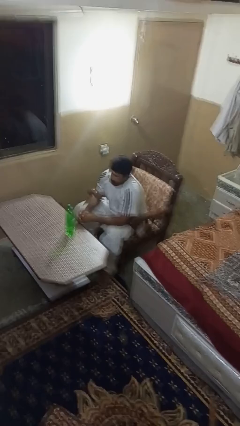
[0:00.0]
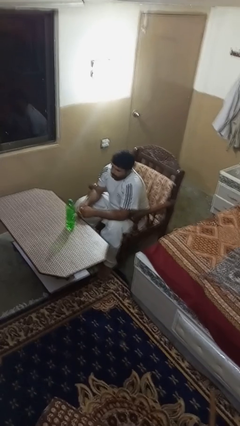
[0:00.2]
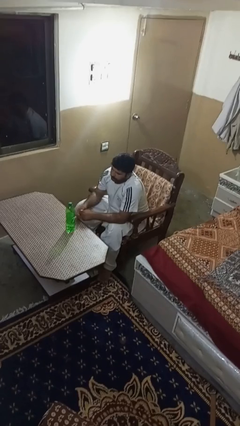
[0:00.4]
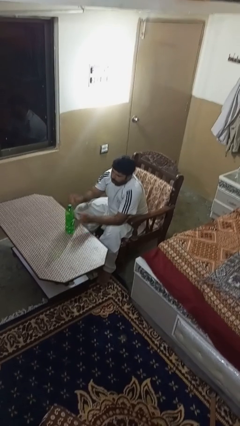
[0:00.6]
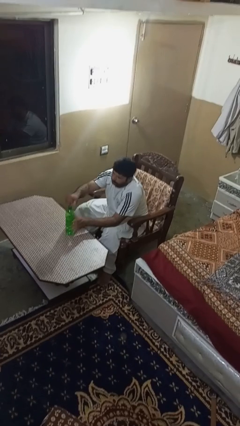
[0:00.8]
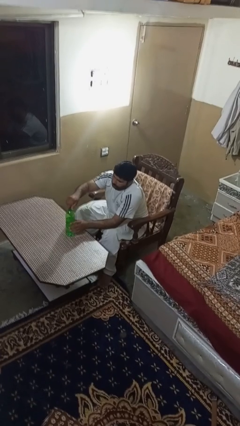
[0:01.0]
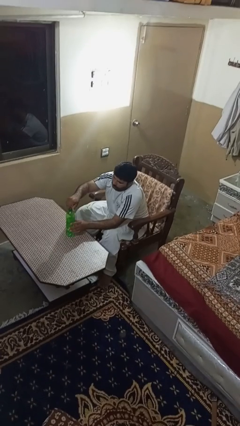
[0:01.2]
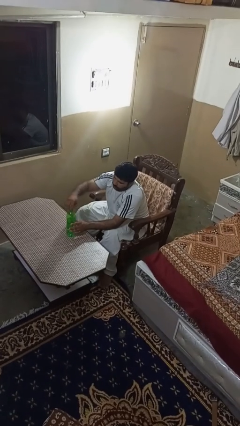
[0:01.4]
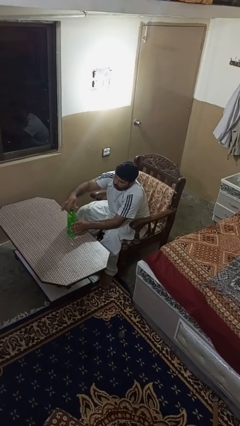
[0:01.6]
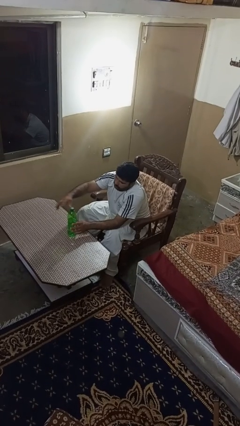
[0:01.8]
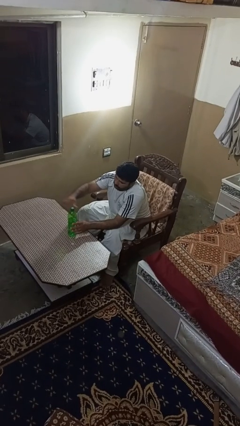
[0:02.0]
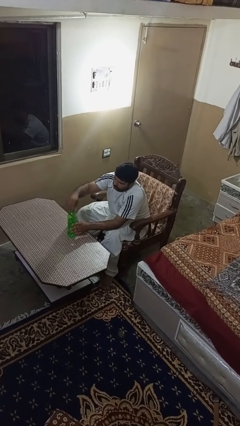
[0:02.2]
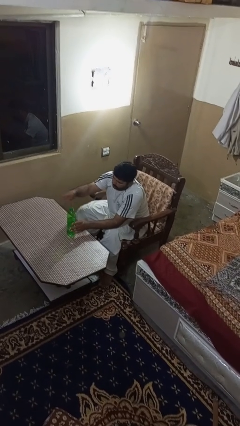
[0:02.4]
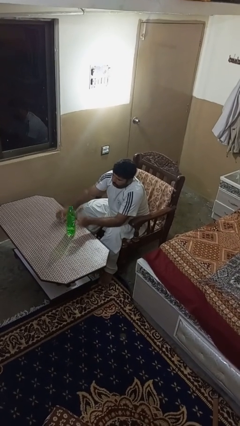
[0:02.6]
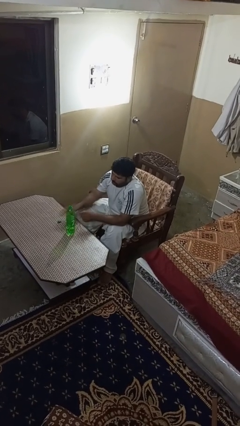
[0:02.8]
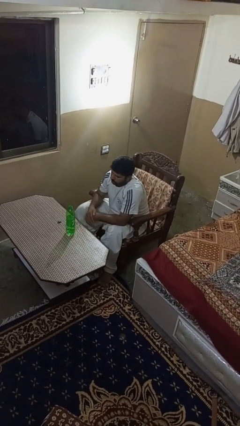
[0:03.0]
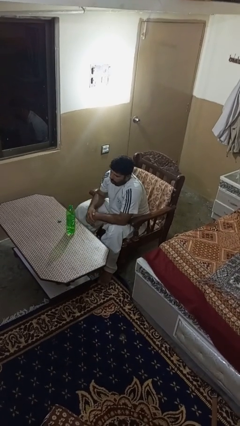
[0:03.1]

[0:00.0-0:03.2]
person unscrews lid from bottle

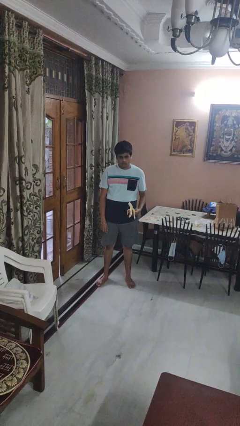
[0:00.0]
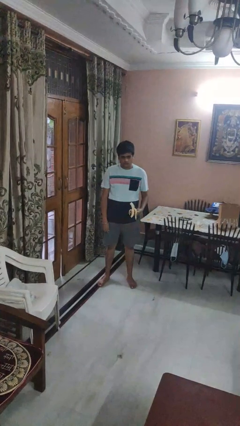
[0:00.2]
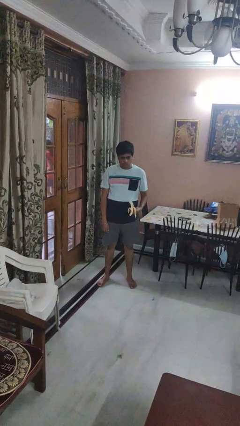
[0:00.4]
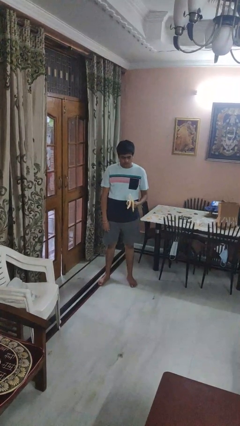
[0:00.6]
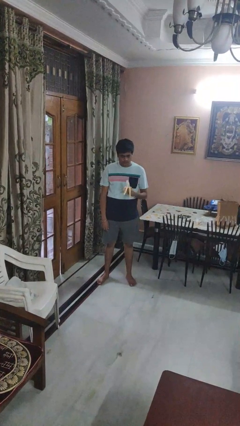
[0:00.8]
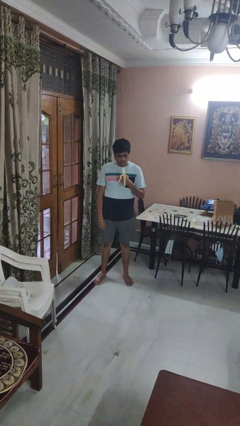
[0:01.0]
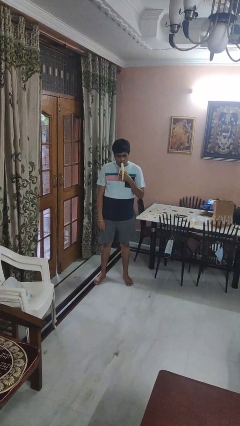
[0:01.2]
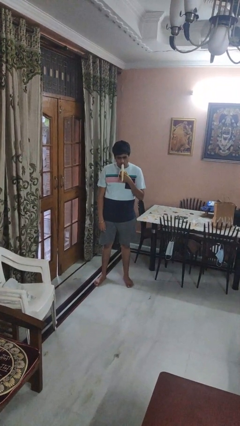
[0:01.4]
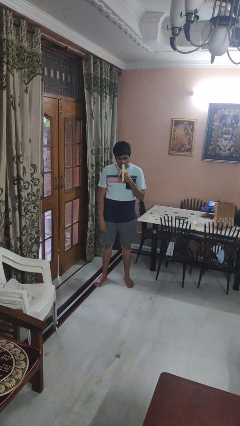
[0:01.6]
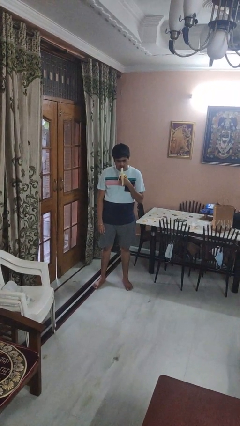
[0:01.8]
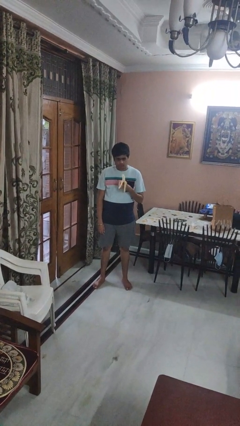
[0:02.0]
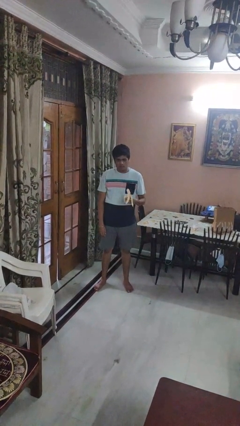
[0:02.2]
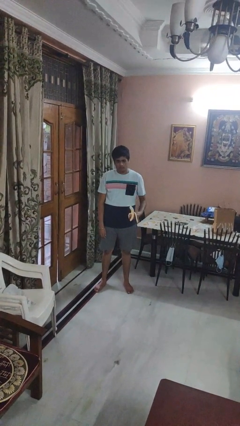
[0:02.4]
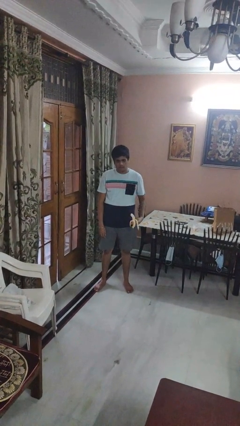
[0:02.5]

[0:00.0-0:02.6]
person eats banana

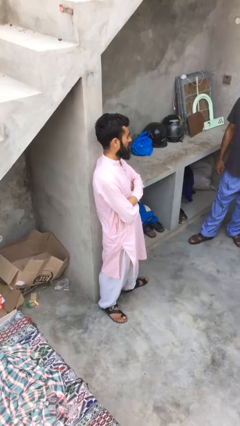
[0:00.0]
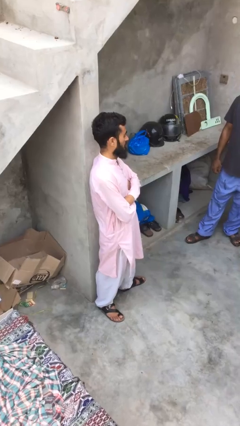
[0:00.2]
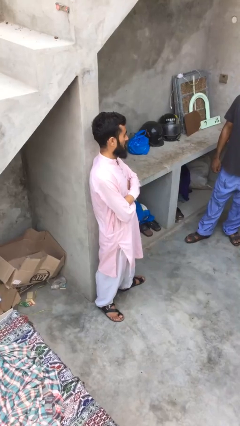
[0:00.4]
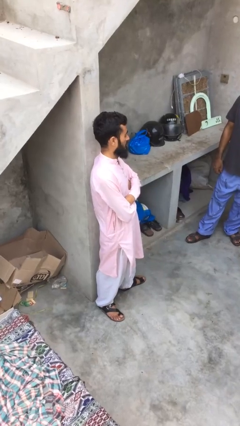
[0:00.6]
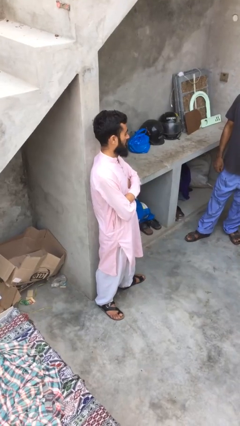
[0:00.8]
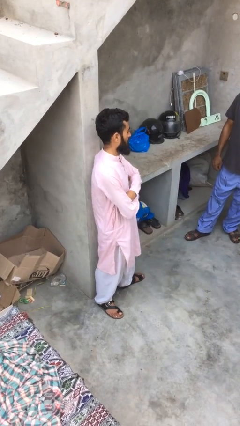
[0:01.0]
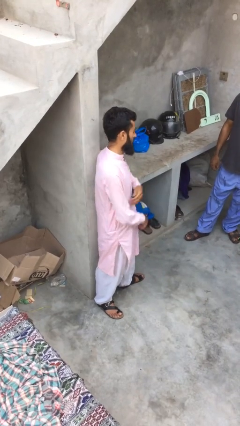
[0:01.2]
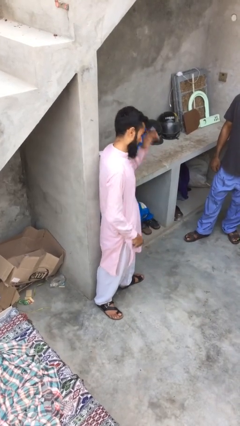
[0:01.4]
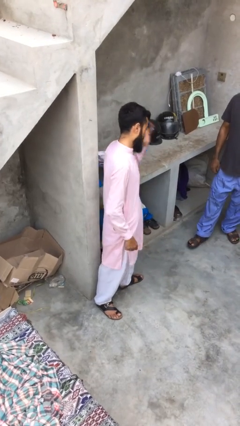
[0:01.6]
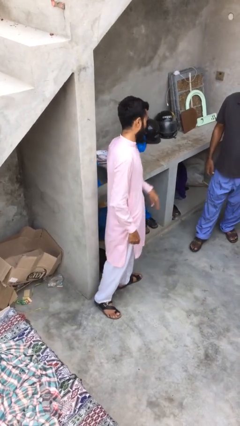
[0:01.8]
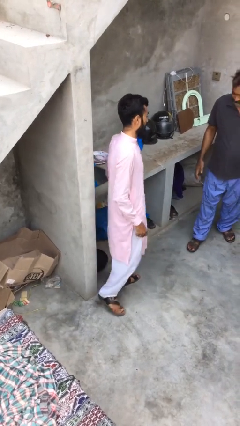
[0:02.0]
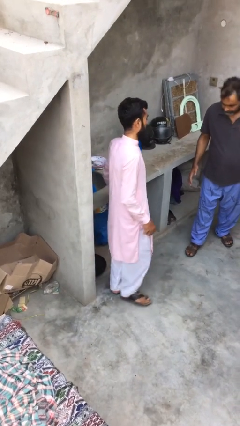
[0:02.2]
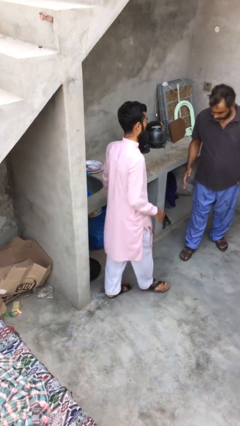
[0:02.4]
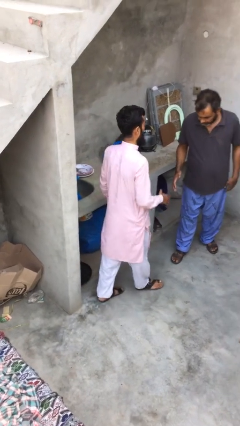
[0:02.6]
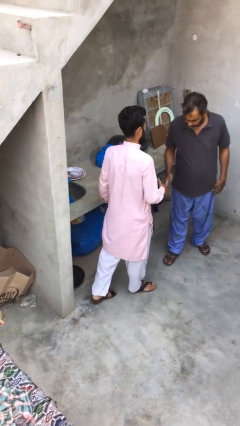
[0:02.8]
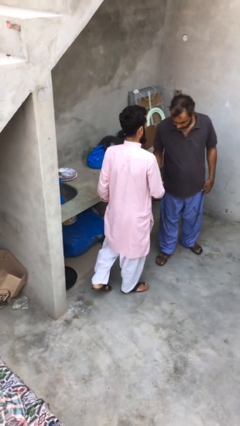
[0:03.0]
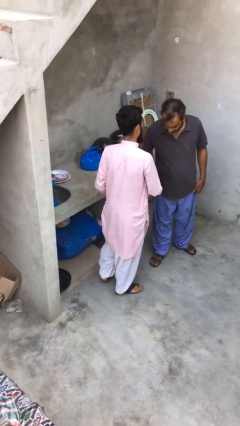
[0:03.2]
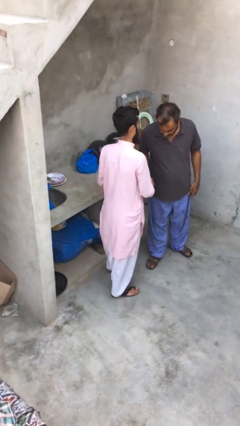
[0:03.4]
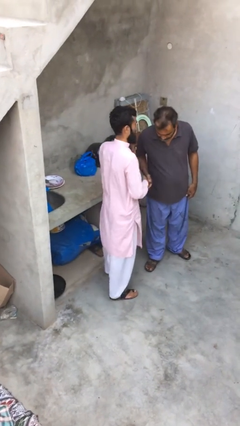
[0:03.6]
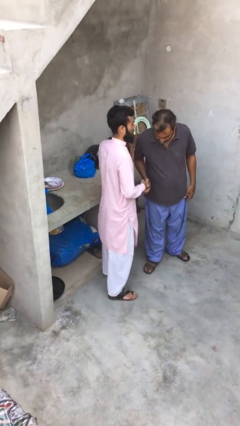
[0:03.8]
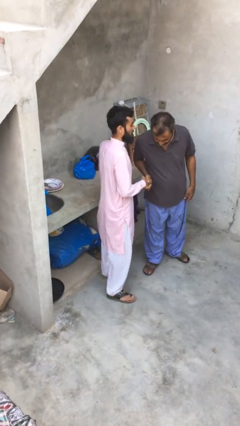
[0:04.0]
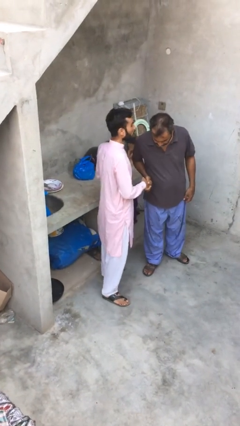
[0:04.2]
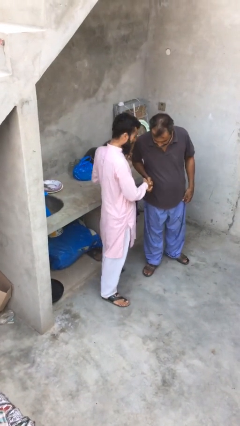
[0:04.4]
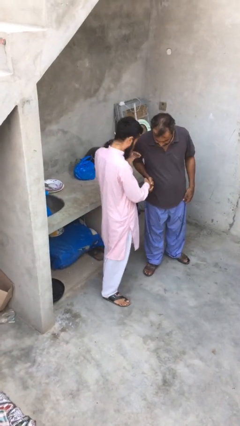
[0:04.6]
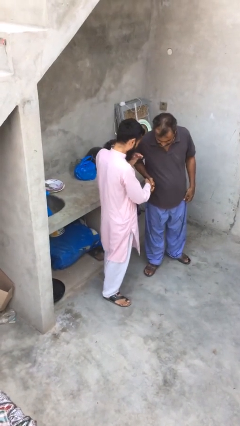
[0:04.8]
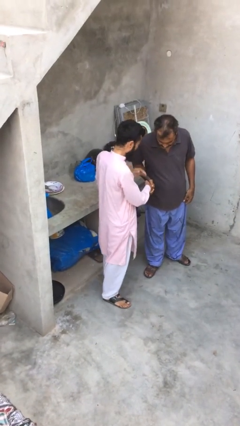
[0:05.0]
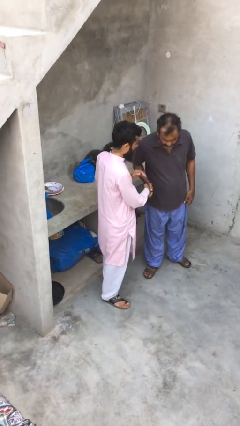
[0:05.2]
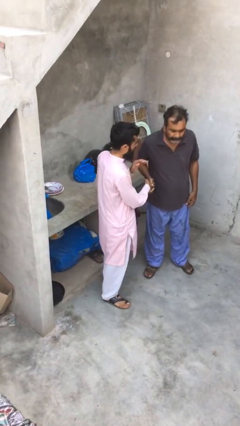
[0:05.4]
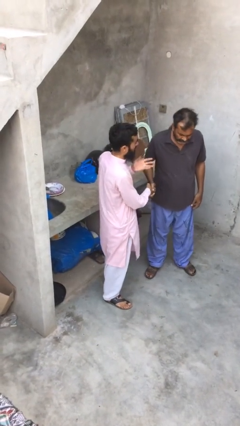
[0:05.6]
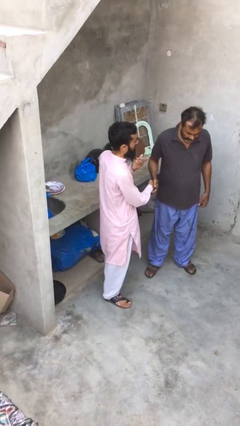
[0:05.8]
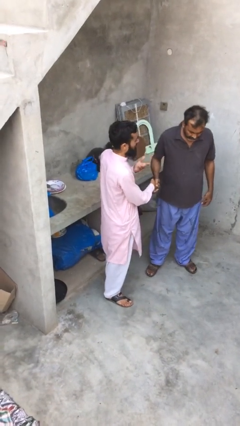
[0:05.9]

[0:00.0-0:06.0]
person shakes hand

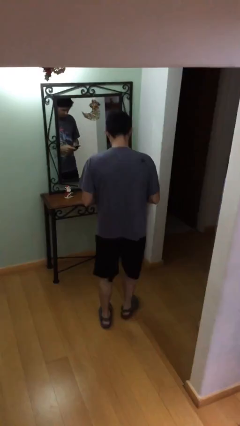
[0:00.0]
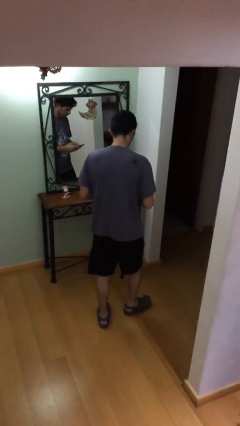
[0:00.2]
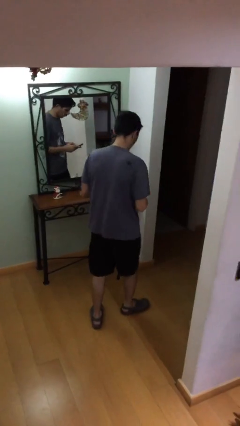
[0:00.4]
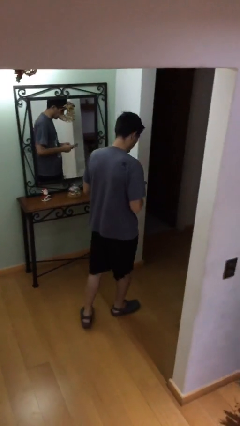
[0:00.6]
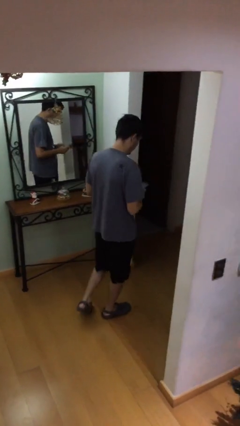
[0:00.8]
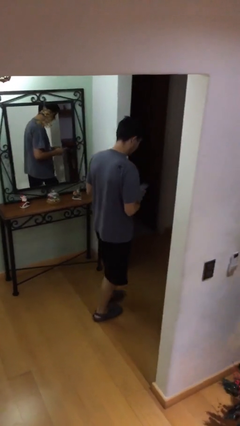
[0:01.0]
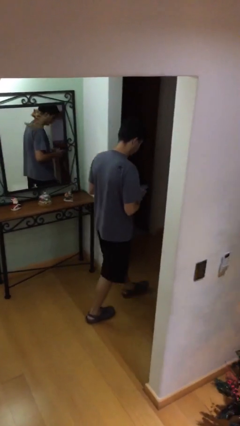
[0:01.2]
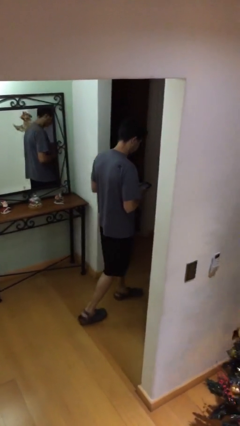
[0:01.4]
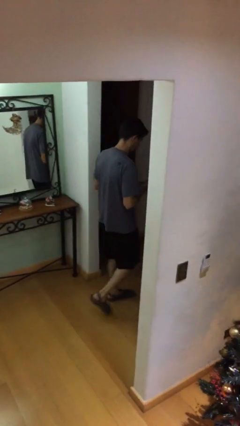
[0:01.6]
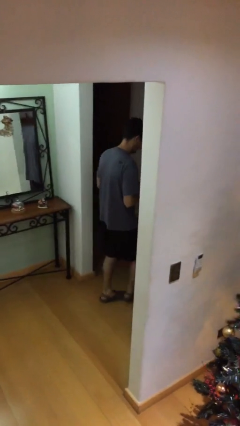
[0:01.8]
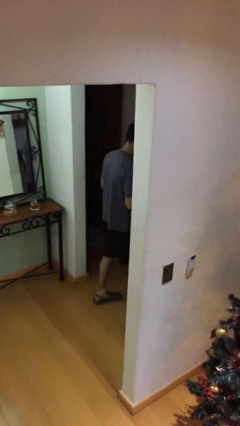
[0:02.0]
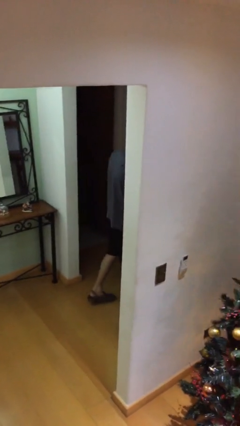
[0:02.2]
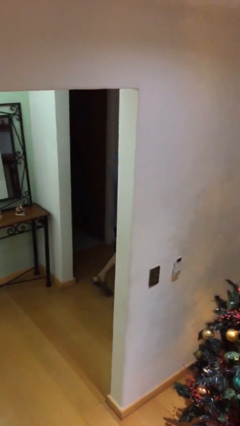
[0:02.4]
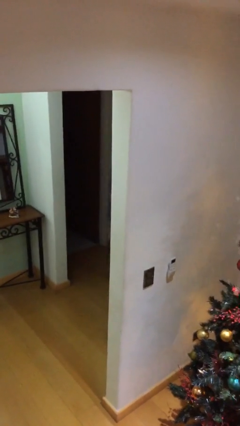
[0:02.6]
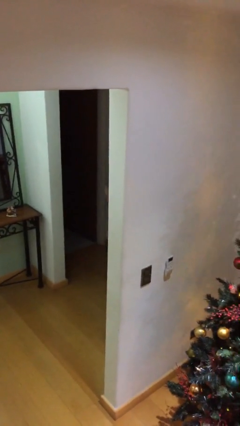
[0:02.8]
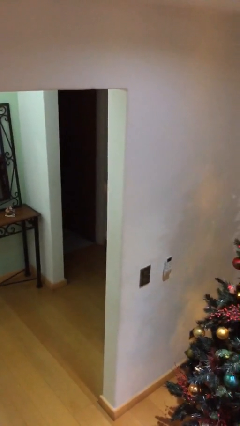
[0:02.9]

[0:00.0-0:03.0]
person exits scene through structure

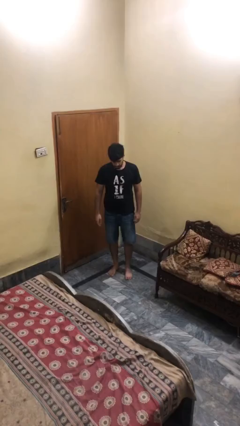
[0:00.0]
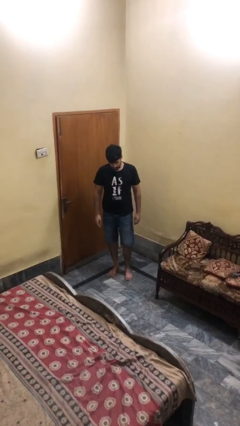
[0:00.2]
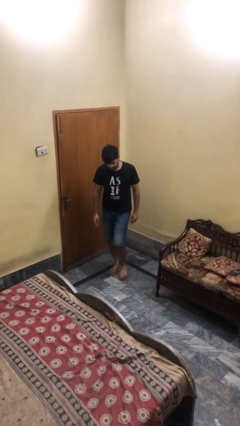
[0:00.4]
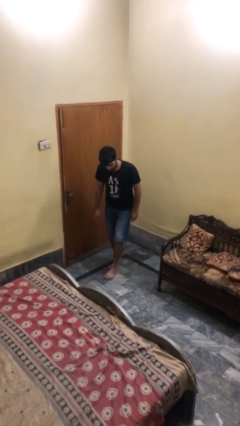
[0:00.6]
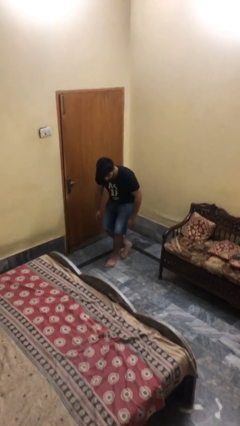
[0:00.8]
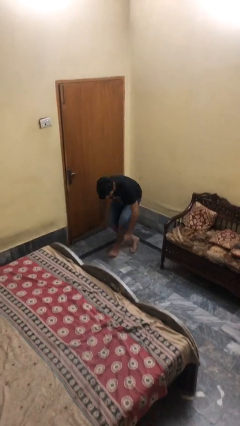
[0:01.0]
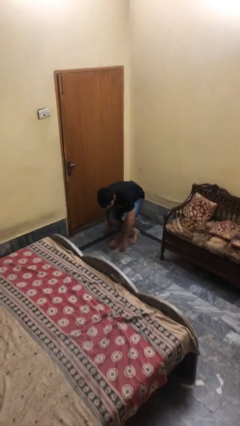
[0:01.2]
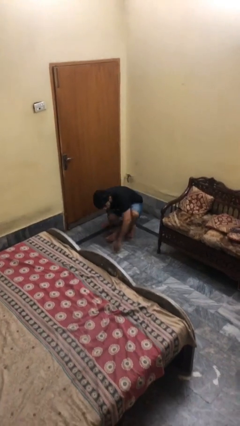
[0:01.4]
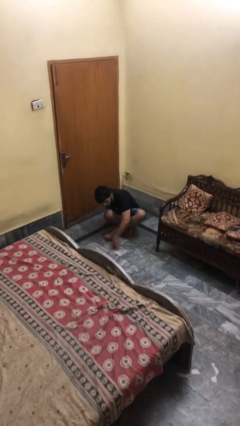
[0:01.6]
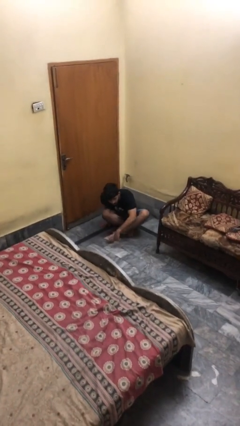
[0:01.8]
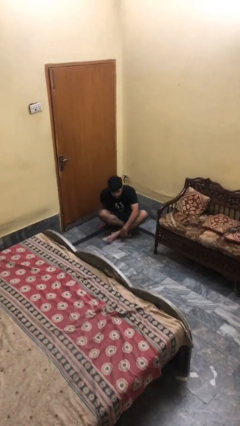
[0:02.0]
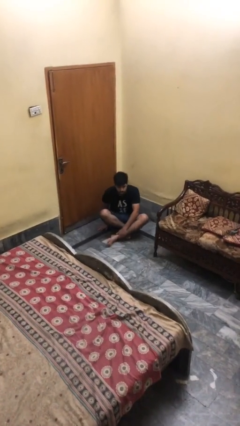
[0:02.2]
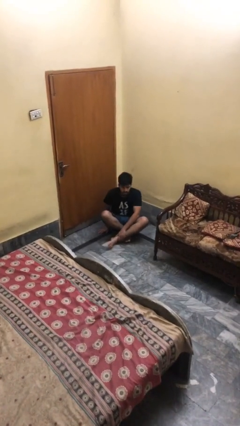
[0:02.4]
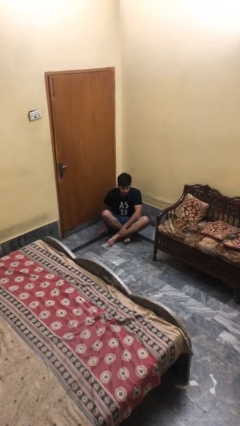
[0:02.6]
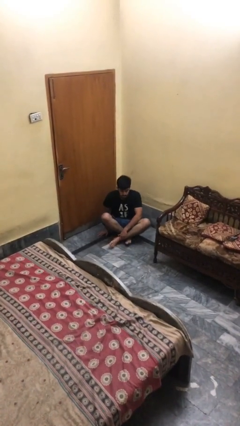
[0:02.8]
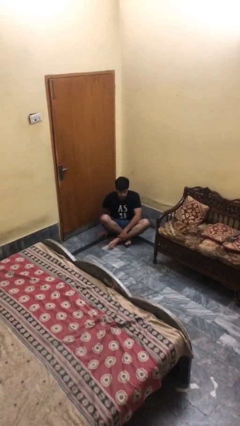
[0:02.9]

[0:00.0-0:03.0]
person sits crisscross
